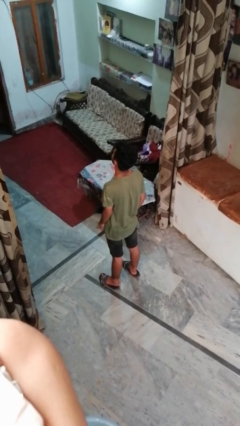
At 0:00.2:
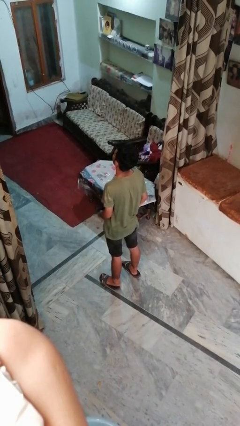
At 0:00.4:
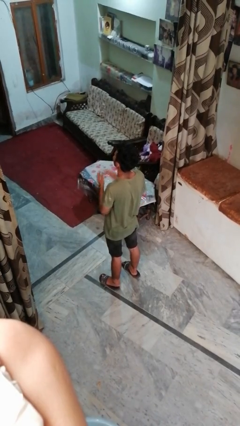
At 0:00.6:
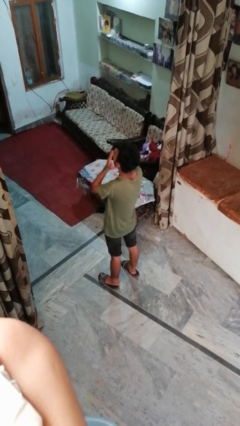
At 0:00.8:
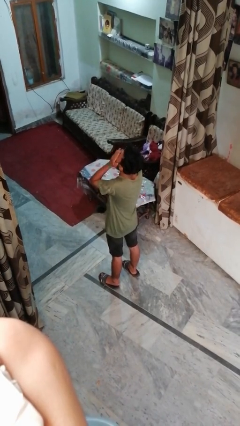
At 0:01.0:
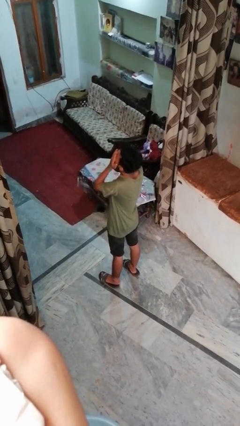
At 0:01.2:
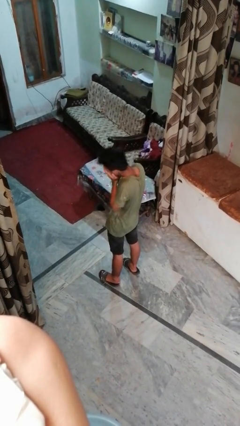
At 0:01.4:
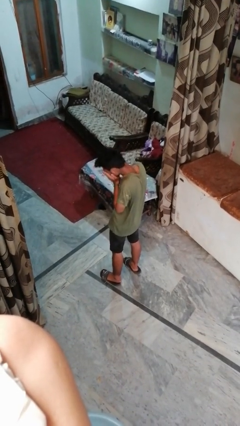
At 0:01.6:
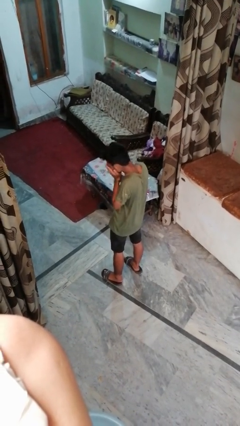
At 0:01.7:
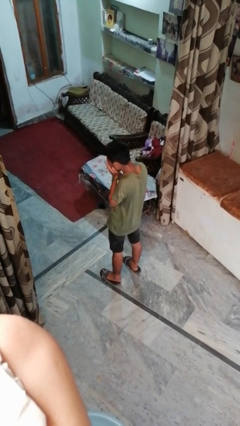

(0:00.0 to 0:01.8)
person sneezes into hand

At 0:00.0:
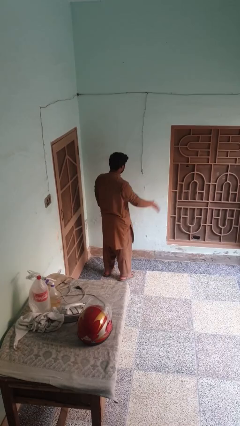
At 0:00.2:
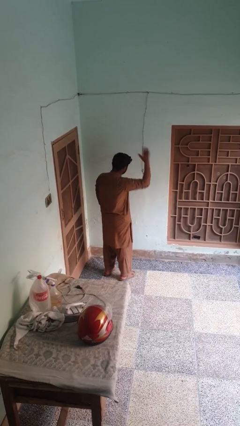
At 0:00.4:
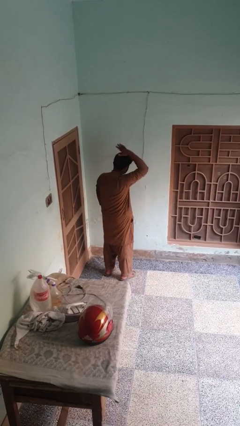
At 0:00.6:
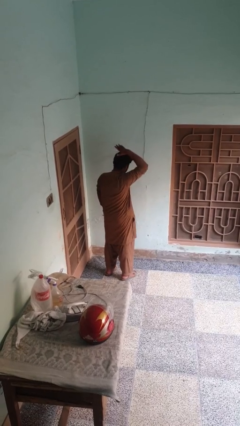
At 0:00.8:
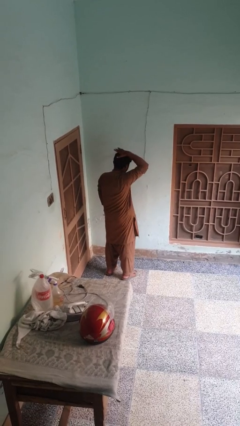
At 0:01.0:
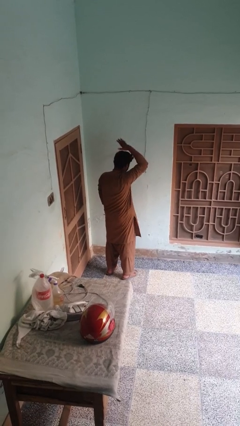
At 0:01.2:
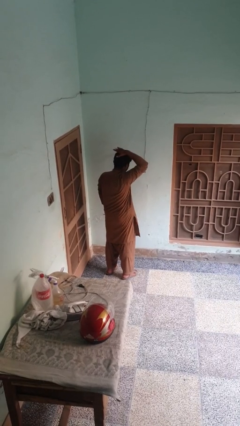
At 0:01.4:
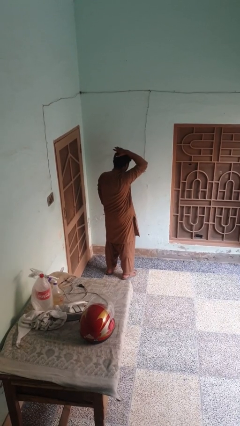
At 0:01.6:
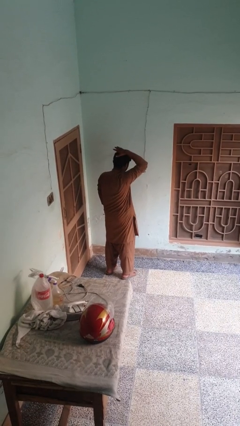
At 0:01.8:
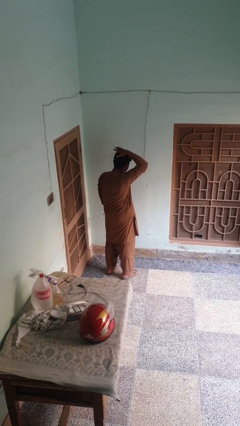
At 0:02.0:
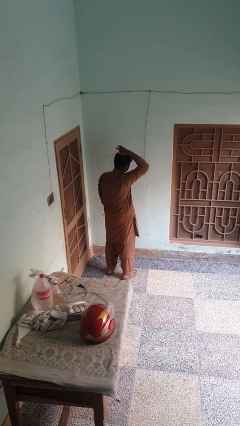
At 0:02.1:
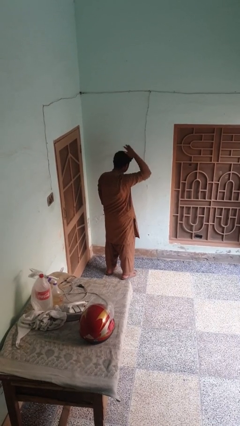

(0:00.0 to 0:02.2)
person pats head

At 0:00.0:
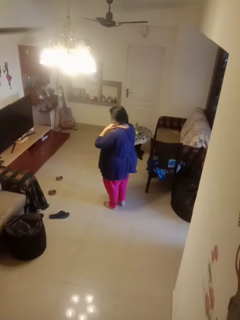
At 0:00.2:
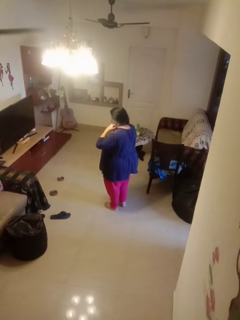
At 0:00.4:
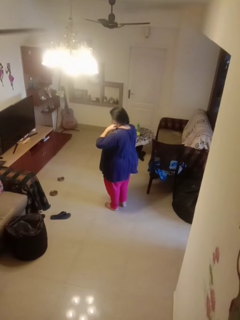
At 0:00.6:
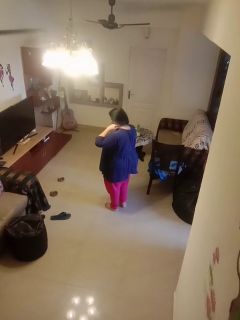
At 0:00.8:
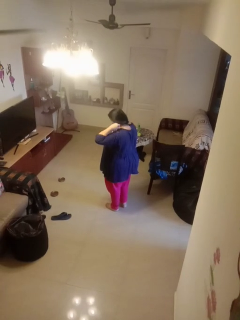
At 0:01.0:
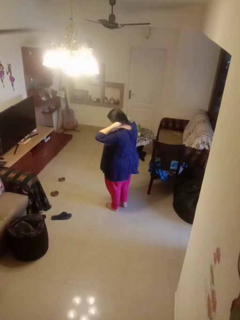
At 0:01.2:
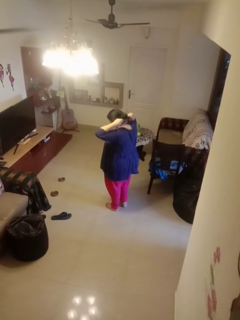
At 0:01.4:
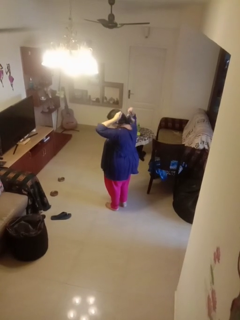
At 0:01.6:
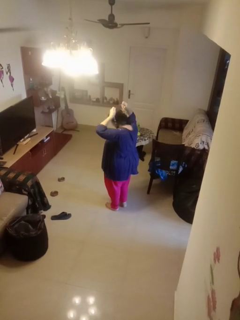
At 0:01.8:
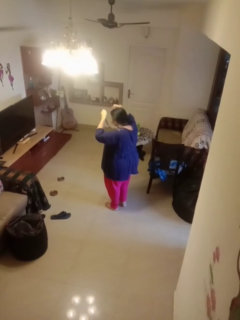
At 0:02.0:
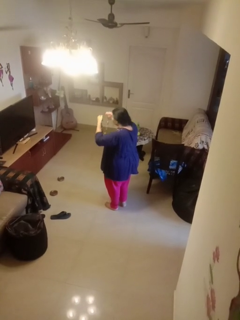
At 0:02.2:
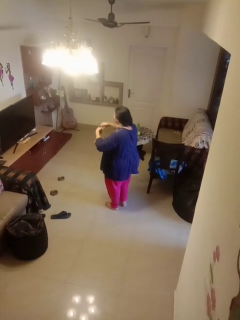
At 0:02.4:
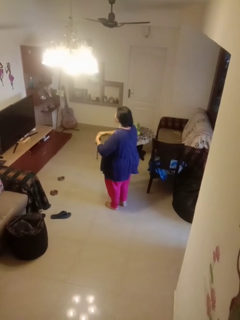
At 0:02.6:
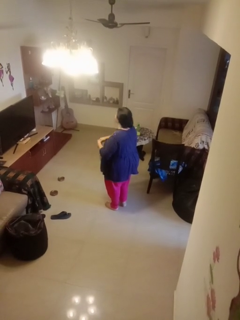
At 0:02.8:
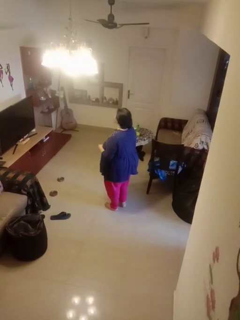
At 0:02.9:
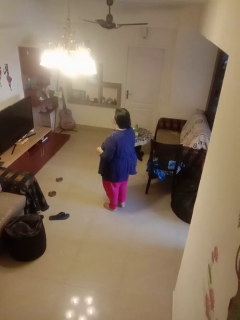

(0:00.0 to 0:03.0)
person takes off necklace

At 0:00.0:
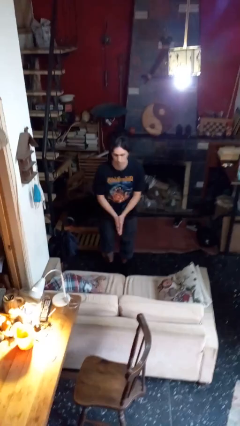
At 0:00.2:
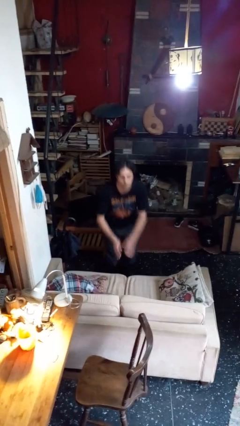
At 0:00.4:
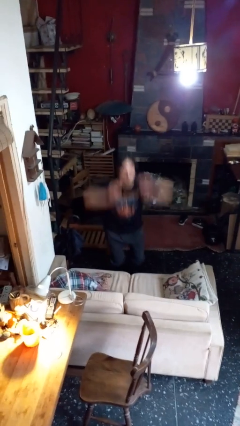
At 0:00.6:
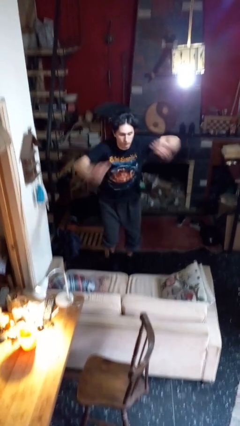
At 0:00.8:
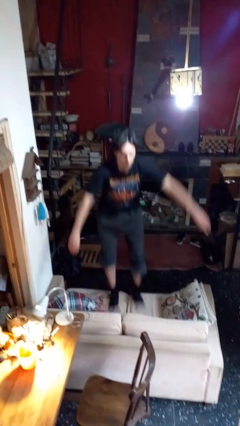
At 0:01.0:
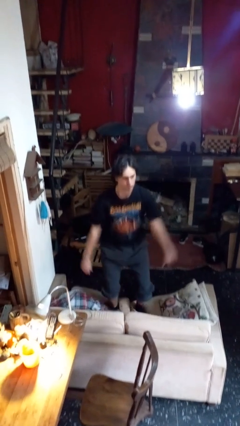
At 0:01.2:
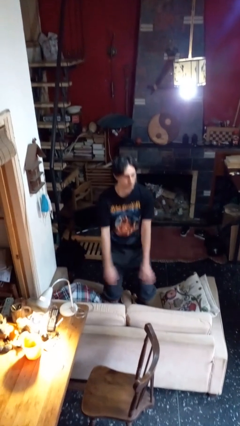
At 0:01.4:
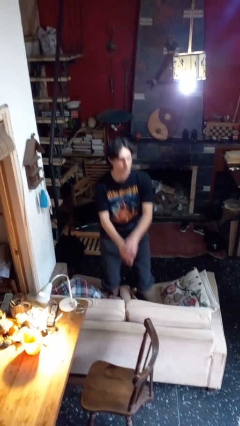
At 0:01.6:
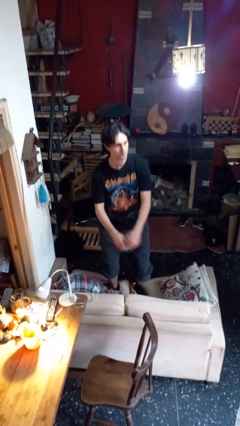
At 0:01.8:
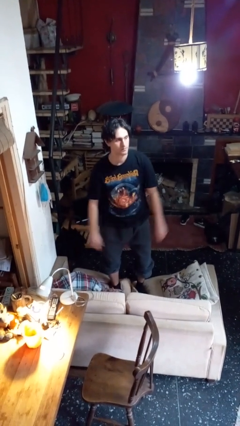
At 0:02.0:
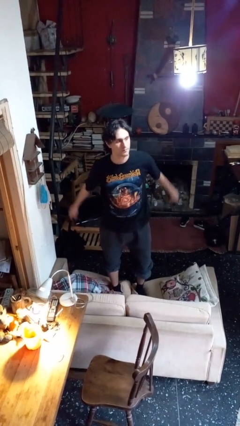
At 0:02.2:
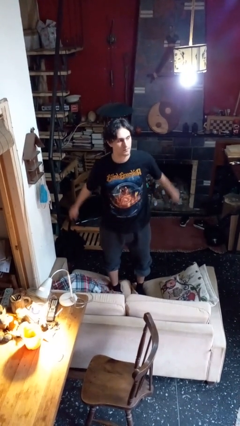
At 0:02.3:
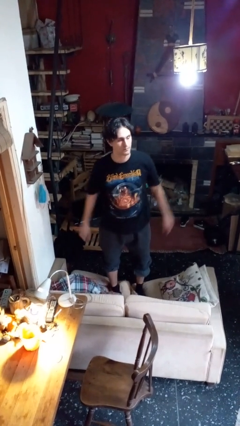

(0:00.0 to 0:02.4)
person climbs on couch

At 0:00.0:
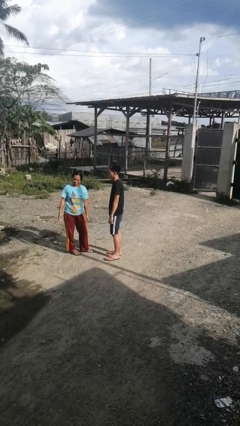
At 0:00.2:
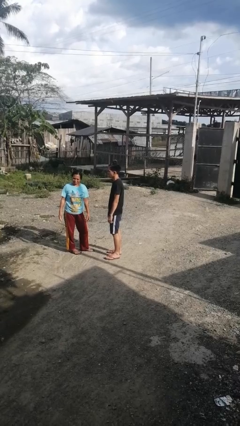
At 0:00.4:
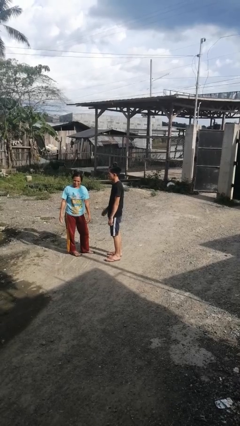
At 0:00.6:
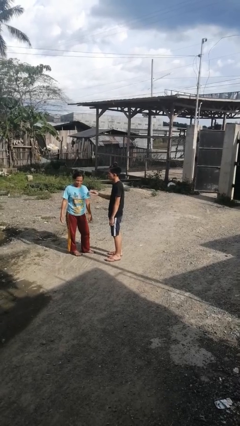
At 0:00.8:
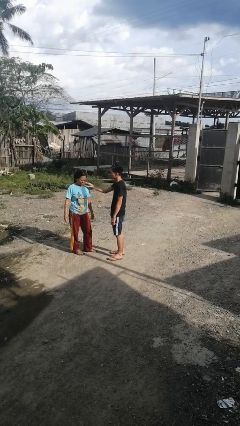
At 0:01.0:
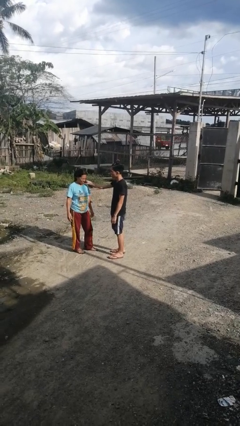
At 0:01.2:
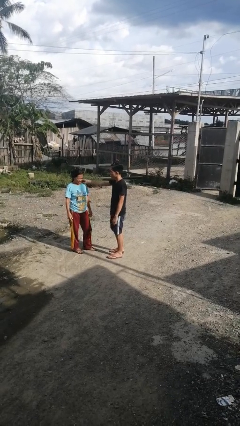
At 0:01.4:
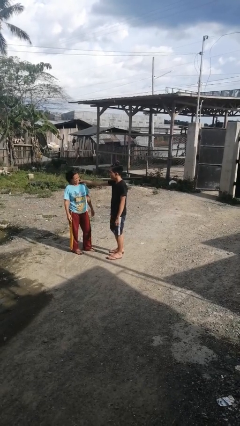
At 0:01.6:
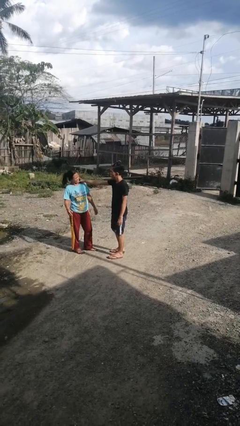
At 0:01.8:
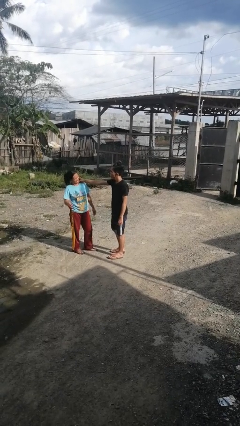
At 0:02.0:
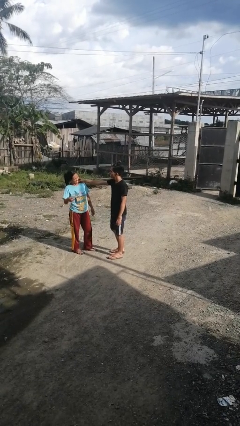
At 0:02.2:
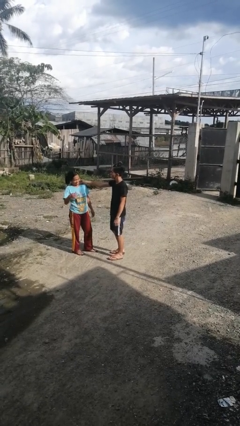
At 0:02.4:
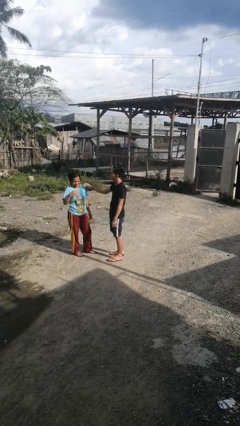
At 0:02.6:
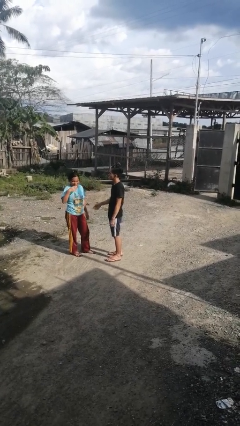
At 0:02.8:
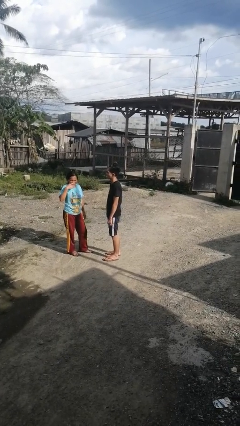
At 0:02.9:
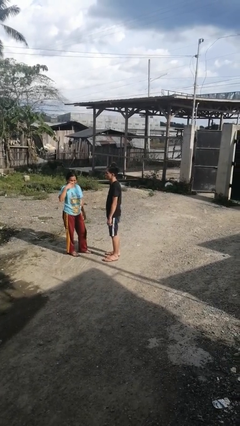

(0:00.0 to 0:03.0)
person tickles person

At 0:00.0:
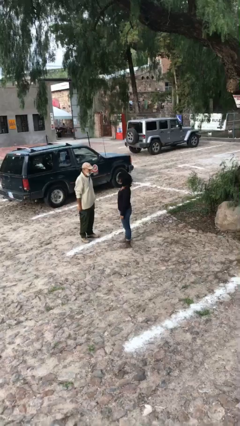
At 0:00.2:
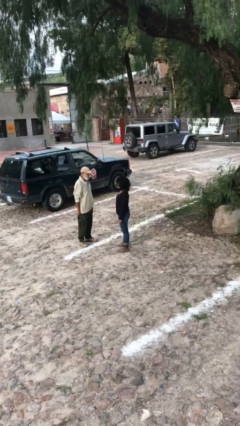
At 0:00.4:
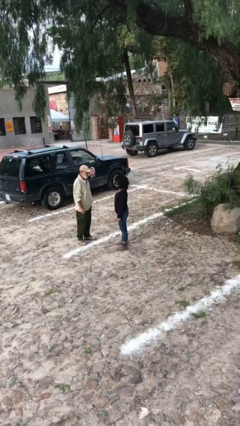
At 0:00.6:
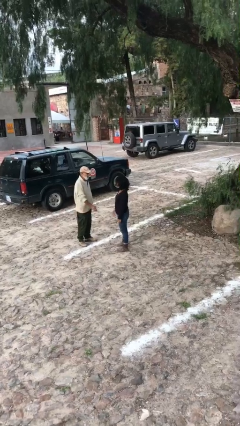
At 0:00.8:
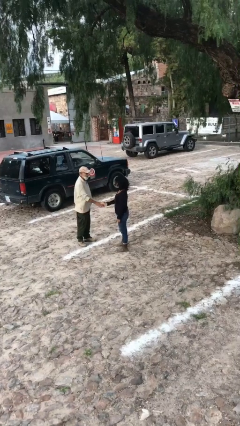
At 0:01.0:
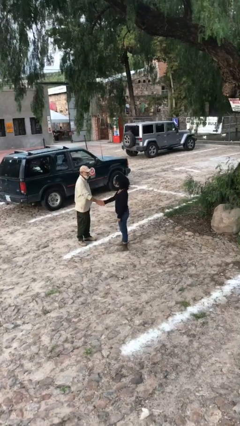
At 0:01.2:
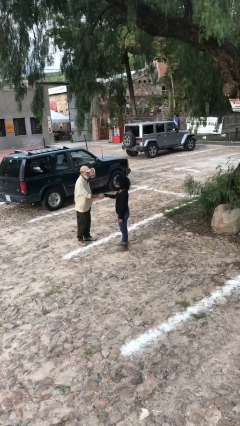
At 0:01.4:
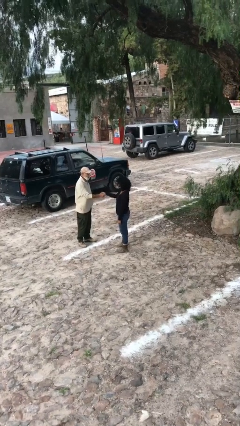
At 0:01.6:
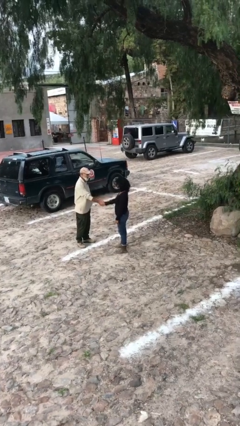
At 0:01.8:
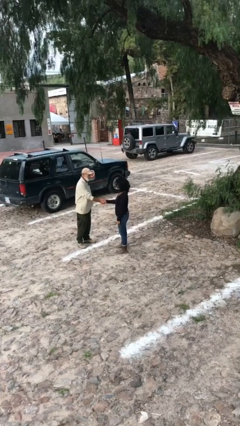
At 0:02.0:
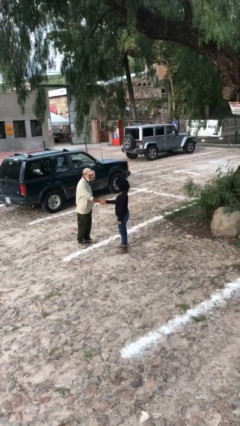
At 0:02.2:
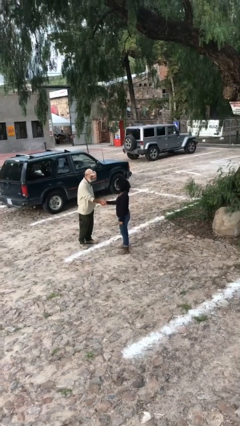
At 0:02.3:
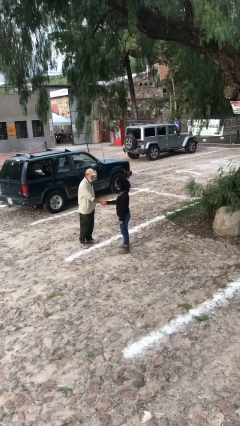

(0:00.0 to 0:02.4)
person shakes hand

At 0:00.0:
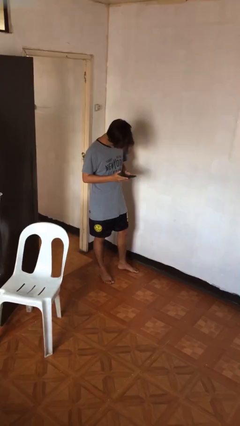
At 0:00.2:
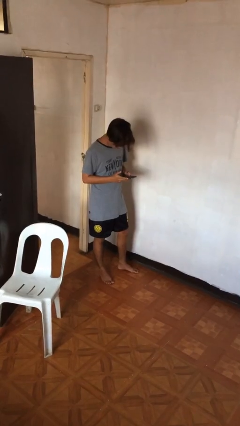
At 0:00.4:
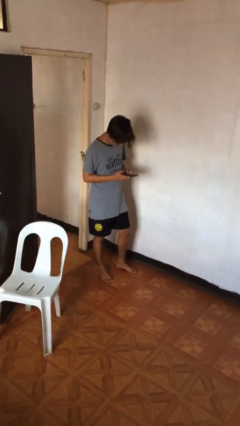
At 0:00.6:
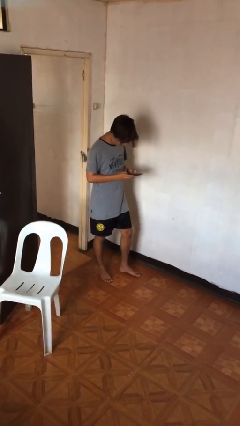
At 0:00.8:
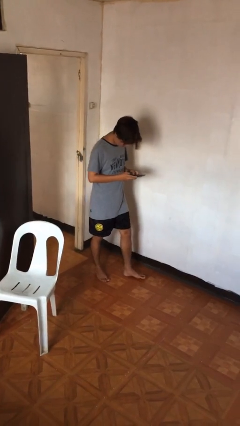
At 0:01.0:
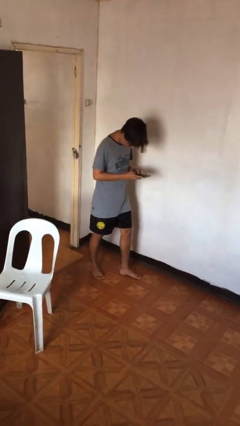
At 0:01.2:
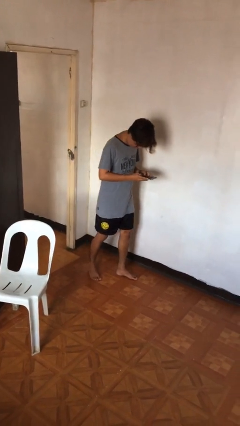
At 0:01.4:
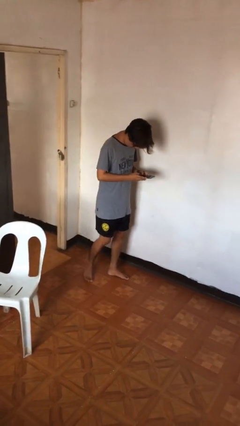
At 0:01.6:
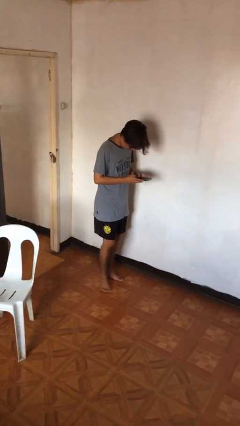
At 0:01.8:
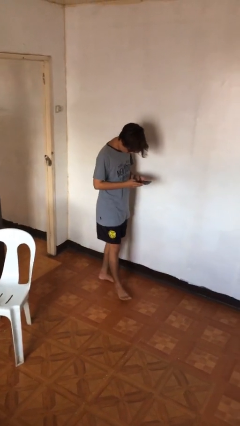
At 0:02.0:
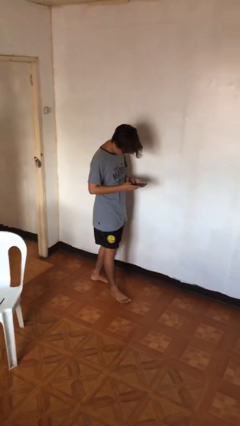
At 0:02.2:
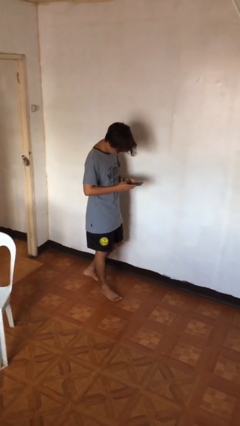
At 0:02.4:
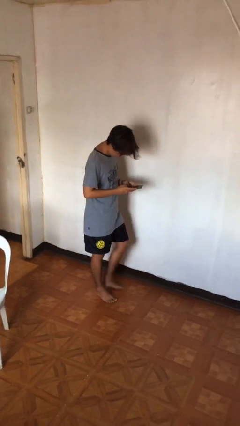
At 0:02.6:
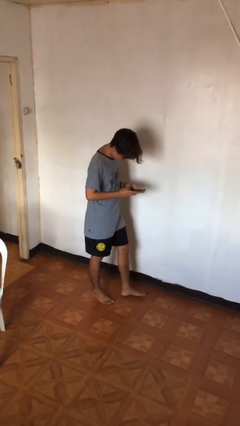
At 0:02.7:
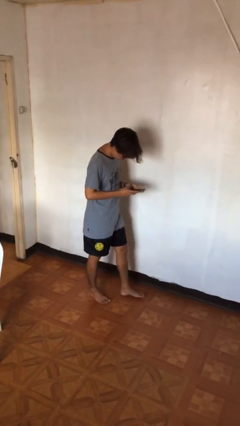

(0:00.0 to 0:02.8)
person texts on phone
